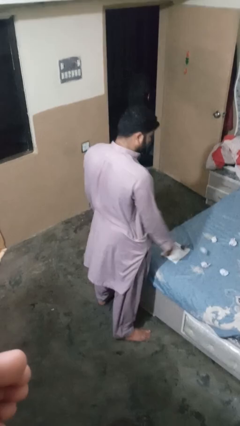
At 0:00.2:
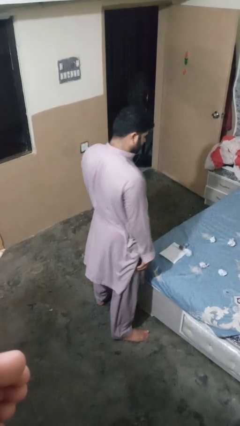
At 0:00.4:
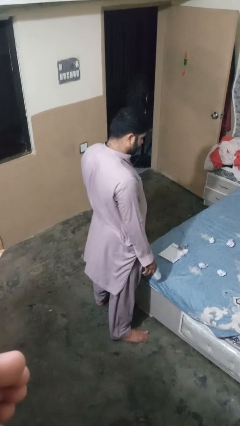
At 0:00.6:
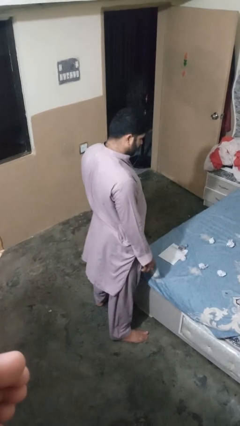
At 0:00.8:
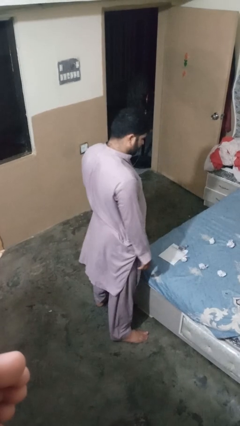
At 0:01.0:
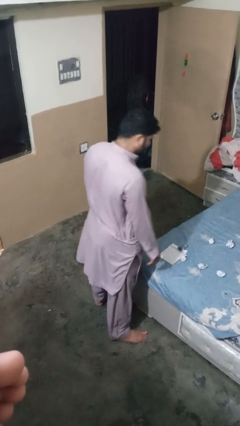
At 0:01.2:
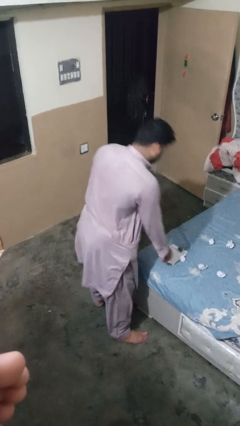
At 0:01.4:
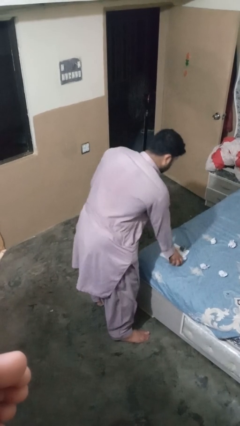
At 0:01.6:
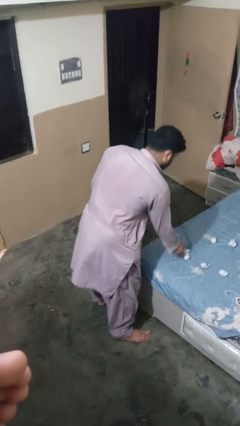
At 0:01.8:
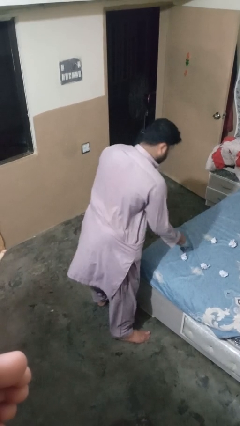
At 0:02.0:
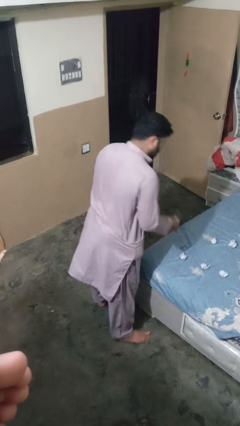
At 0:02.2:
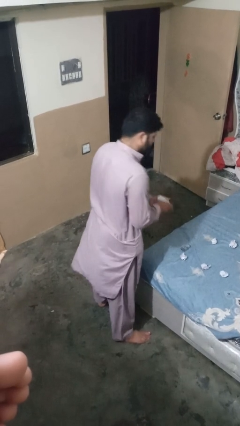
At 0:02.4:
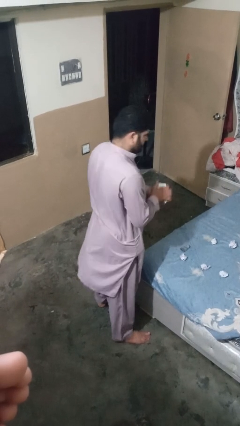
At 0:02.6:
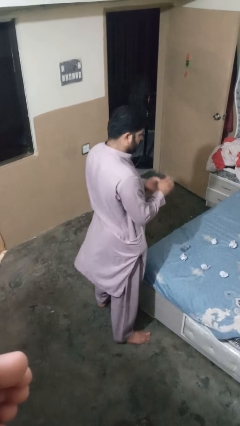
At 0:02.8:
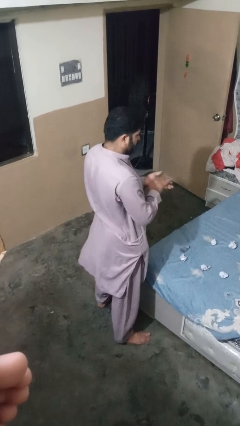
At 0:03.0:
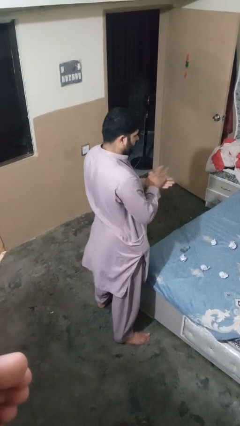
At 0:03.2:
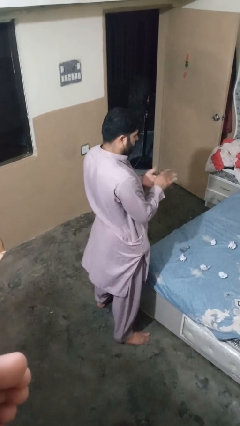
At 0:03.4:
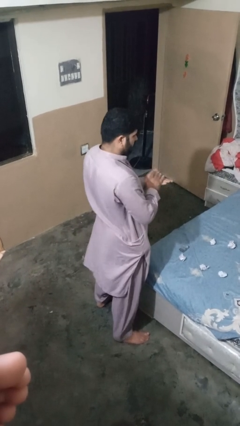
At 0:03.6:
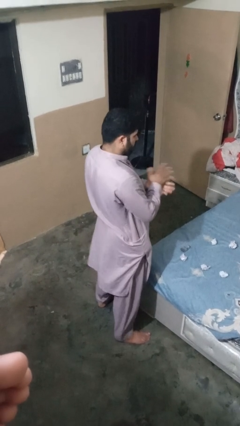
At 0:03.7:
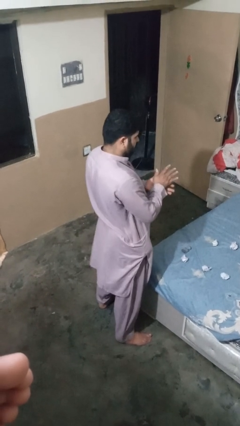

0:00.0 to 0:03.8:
person crumples paper

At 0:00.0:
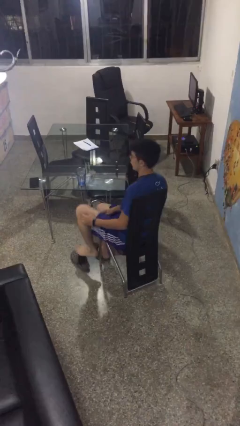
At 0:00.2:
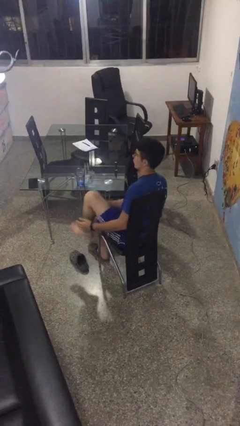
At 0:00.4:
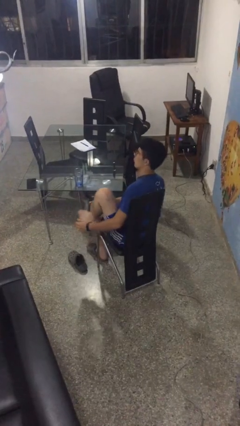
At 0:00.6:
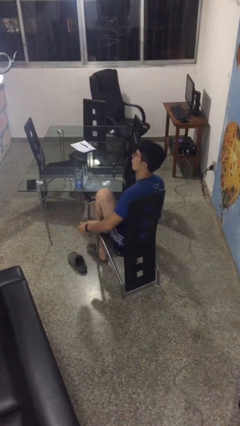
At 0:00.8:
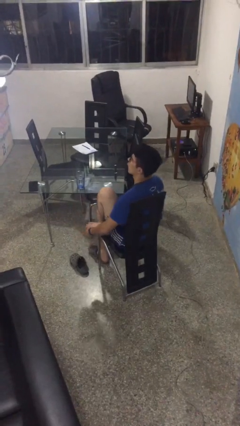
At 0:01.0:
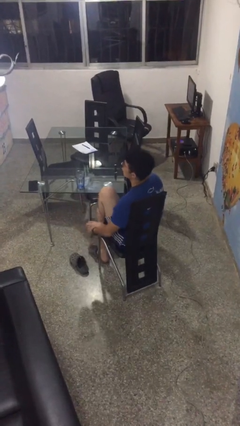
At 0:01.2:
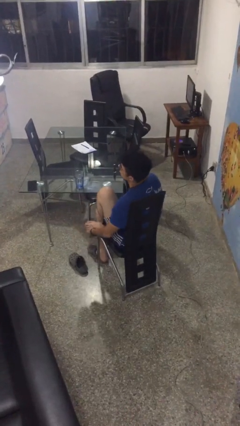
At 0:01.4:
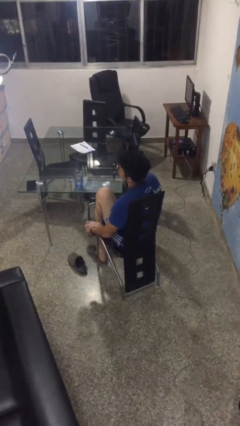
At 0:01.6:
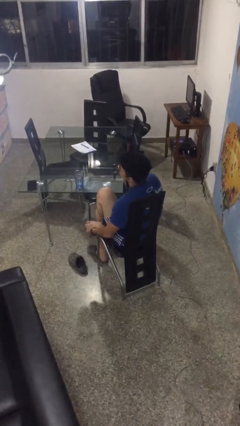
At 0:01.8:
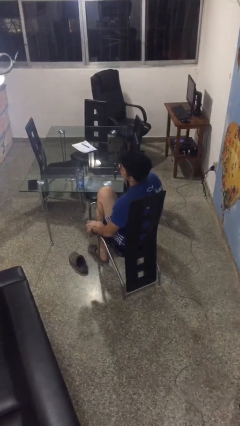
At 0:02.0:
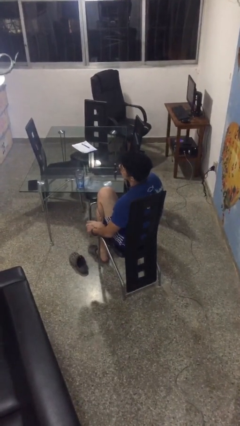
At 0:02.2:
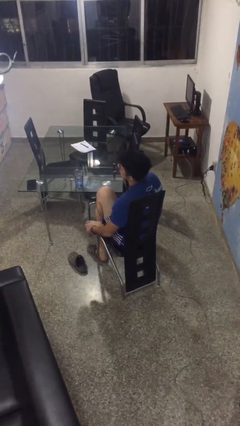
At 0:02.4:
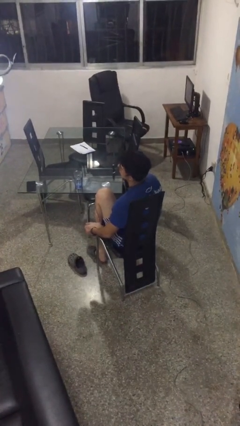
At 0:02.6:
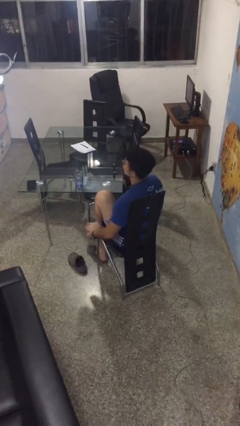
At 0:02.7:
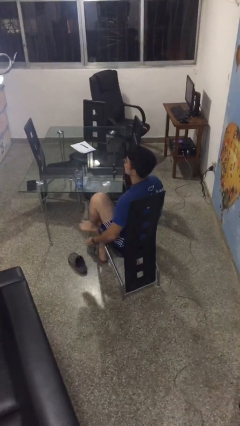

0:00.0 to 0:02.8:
person rubs foot

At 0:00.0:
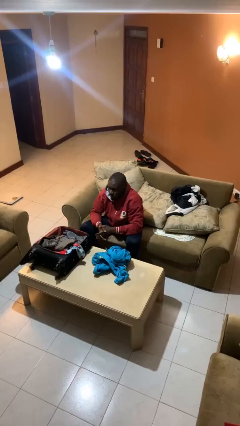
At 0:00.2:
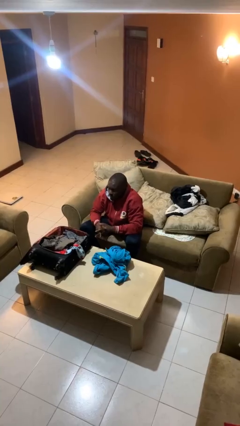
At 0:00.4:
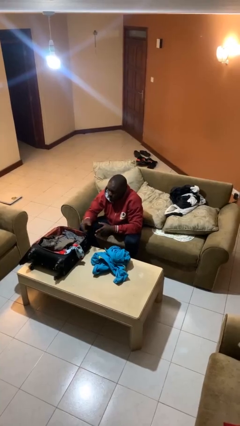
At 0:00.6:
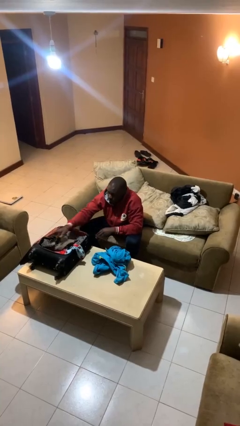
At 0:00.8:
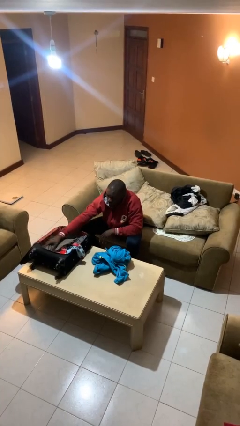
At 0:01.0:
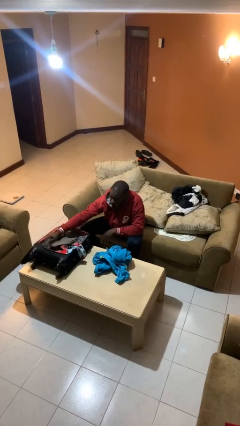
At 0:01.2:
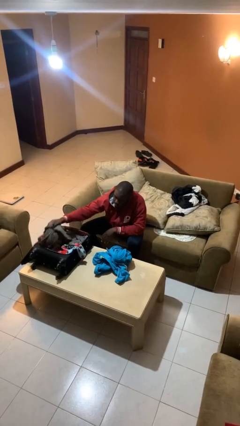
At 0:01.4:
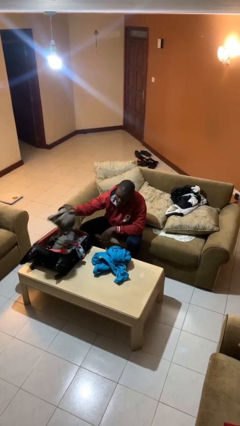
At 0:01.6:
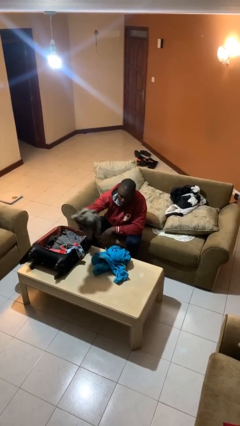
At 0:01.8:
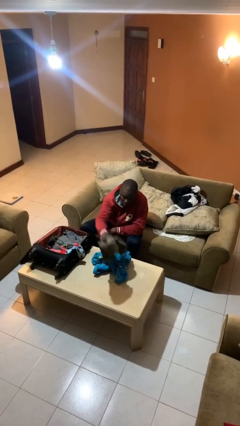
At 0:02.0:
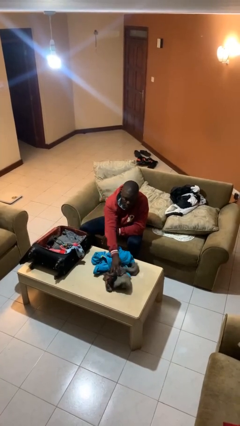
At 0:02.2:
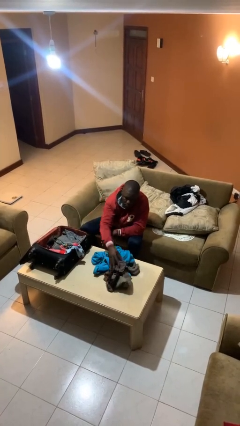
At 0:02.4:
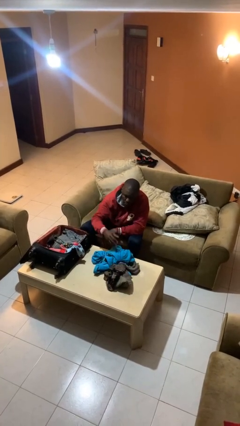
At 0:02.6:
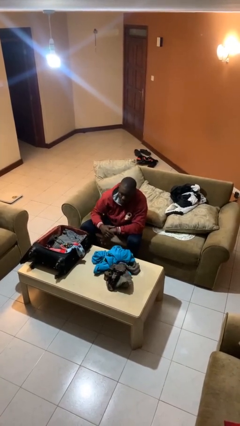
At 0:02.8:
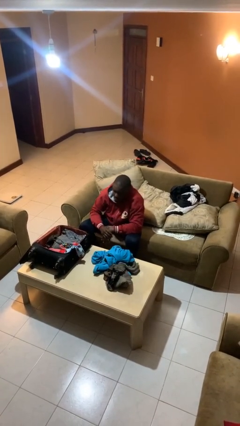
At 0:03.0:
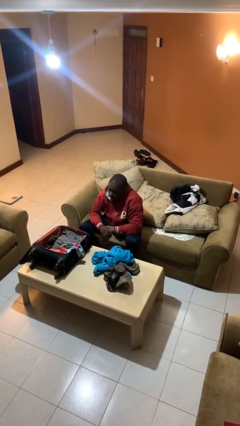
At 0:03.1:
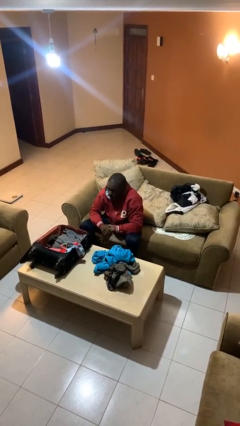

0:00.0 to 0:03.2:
person unloads clothes from suitcase

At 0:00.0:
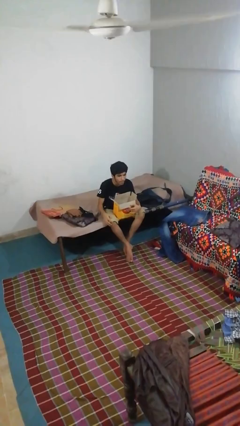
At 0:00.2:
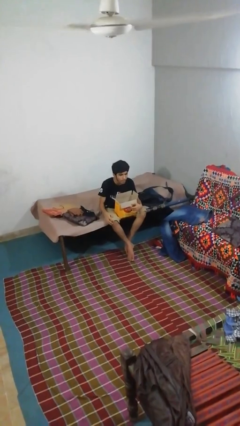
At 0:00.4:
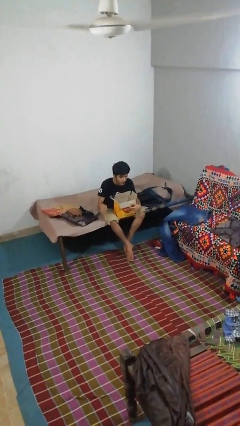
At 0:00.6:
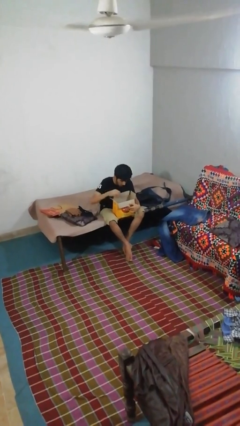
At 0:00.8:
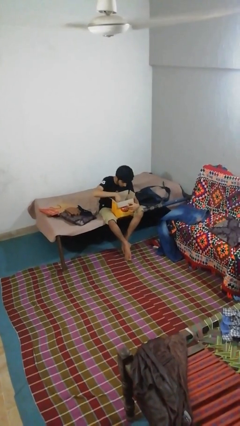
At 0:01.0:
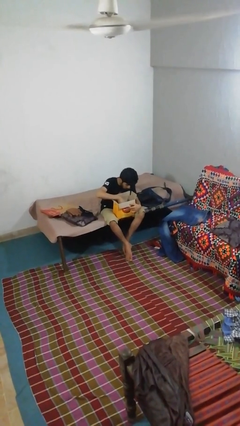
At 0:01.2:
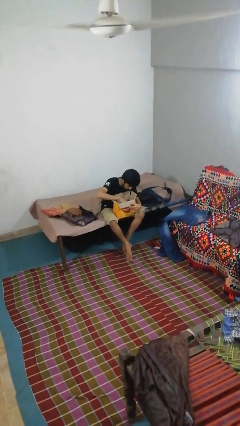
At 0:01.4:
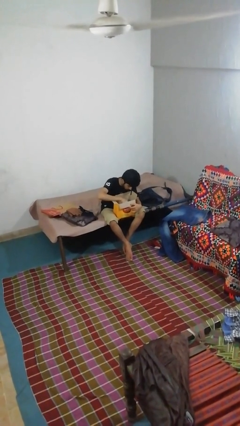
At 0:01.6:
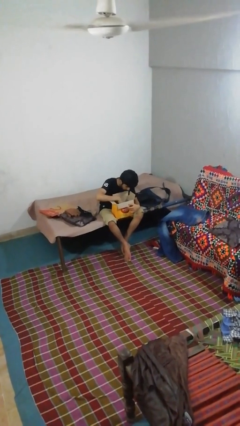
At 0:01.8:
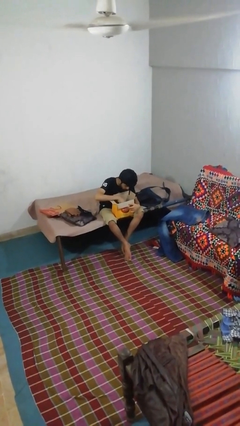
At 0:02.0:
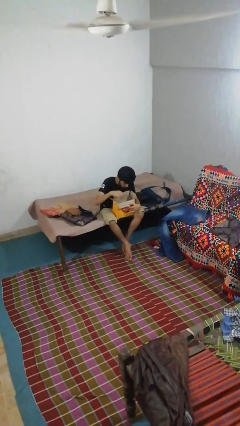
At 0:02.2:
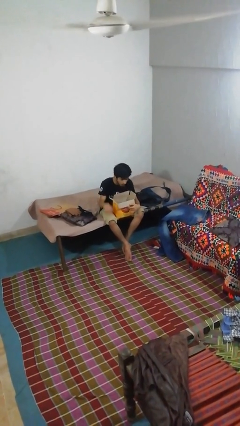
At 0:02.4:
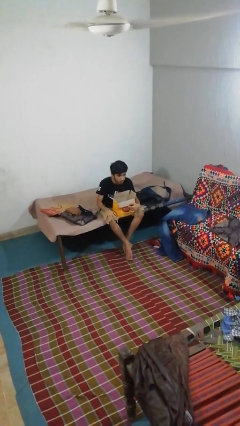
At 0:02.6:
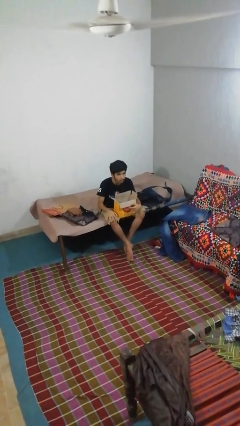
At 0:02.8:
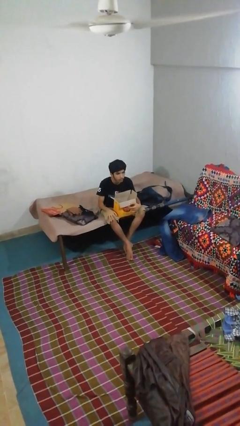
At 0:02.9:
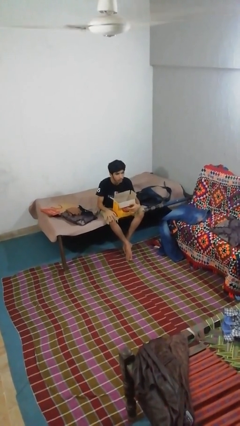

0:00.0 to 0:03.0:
person searches in box

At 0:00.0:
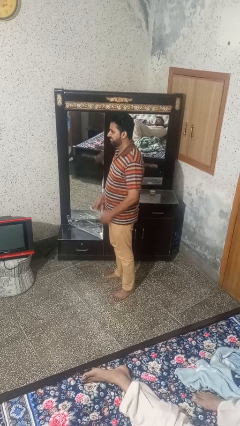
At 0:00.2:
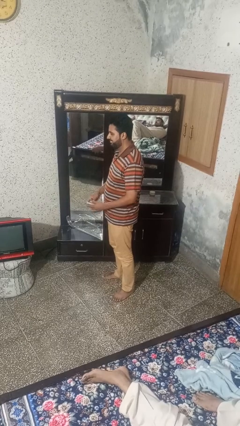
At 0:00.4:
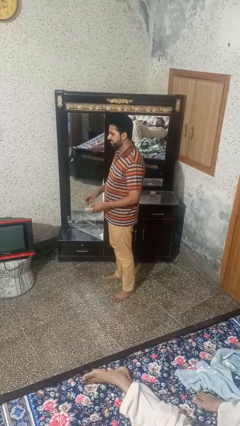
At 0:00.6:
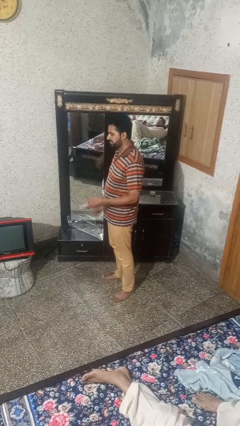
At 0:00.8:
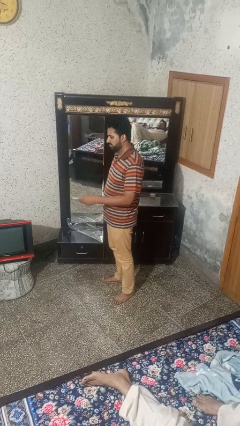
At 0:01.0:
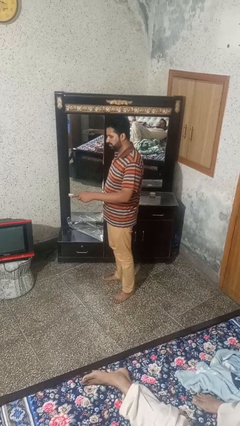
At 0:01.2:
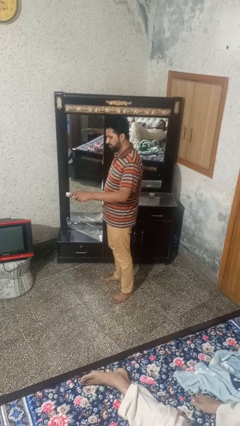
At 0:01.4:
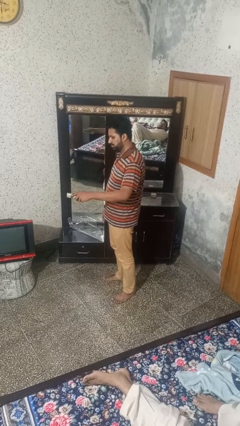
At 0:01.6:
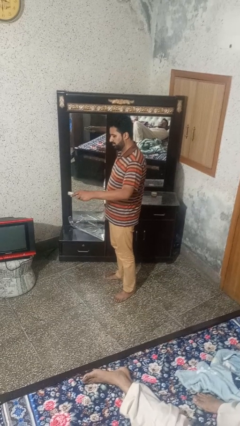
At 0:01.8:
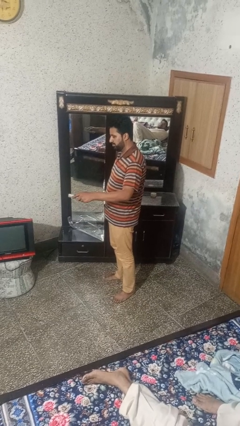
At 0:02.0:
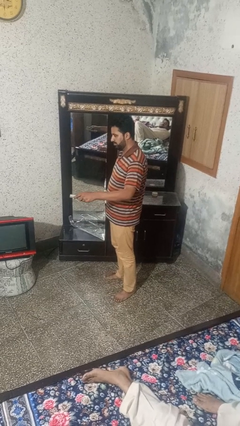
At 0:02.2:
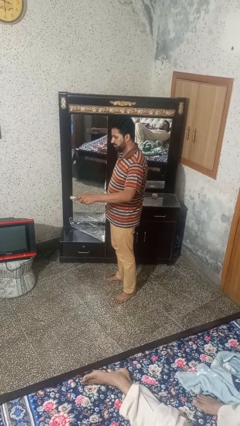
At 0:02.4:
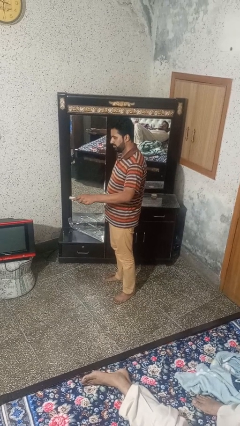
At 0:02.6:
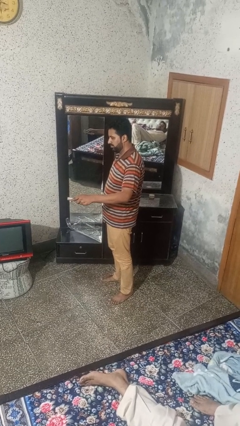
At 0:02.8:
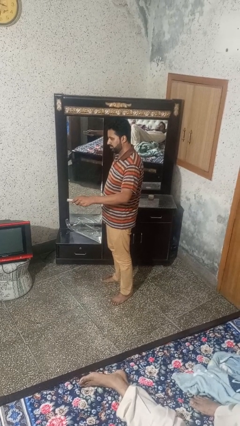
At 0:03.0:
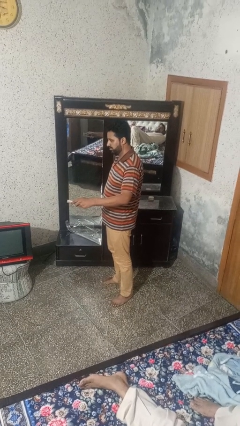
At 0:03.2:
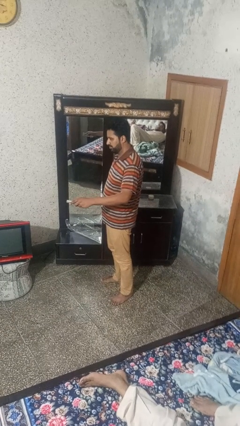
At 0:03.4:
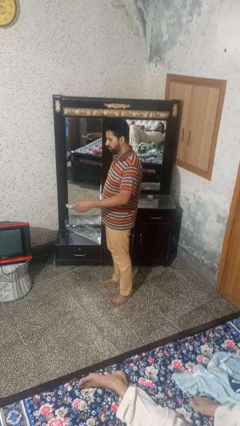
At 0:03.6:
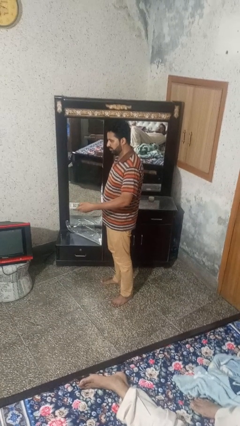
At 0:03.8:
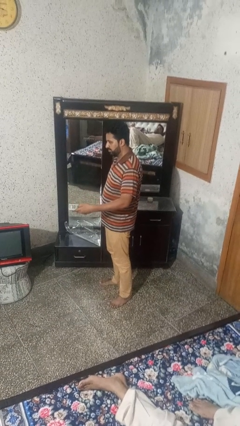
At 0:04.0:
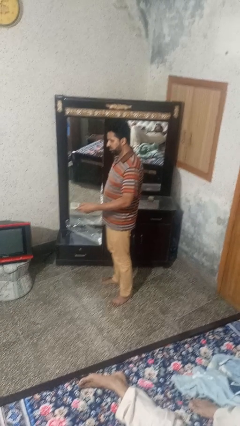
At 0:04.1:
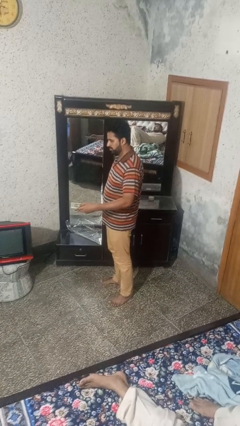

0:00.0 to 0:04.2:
person uses television remote

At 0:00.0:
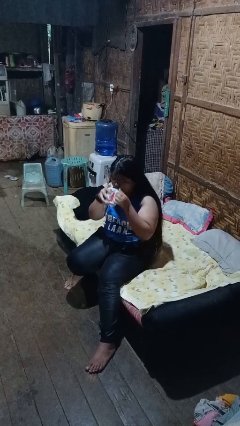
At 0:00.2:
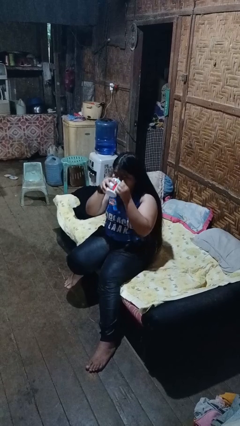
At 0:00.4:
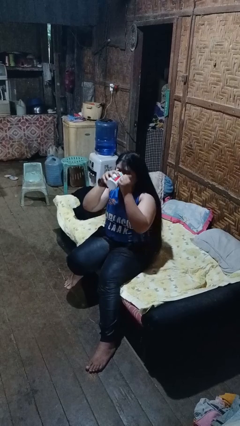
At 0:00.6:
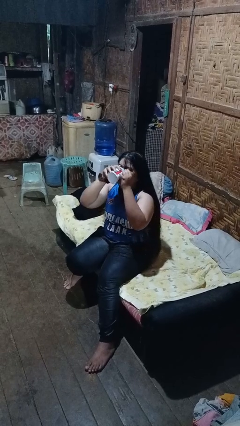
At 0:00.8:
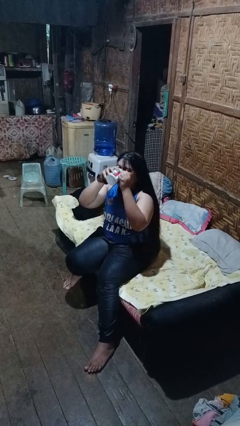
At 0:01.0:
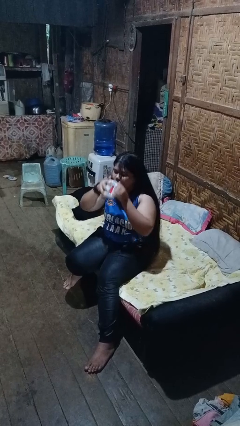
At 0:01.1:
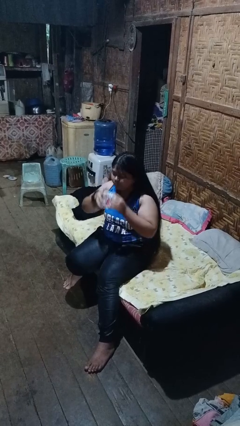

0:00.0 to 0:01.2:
person drinks from mug
